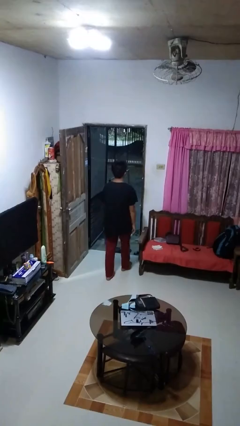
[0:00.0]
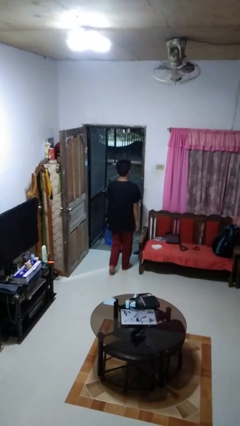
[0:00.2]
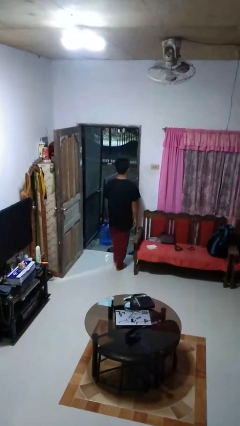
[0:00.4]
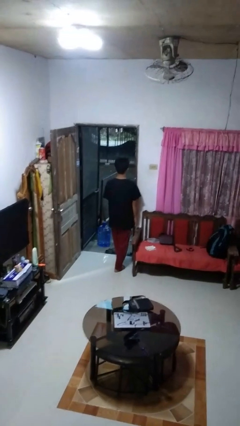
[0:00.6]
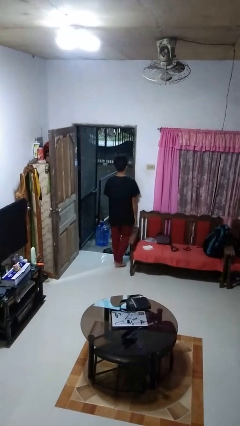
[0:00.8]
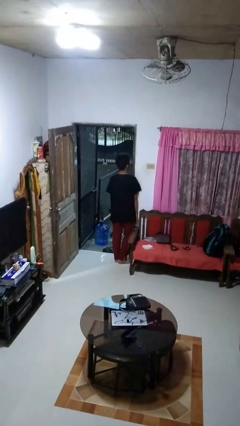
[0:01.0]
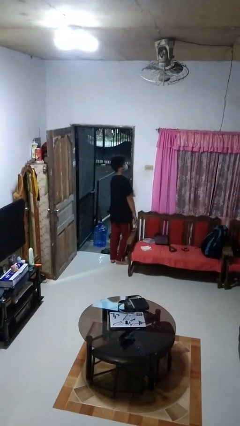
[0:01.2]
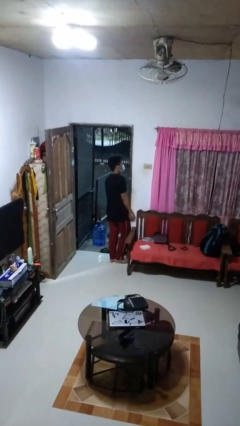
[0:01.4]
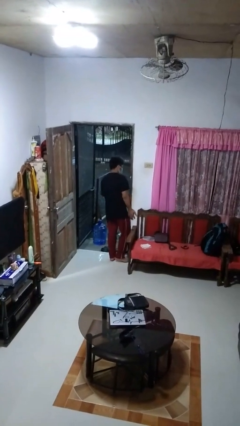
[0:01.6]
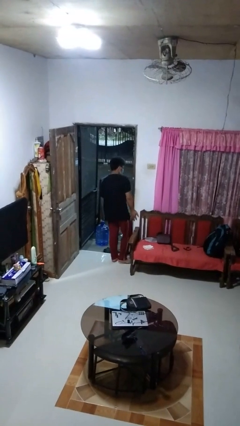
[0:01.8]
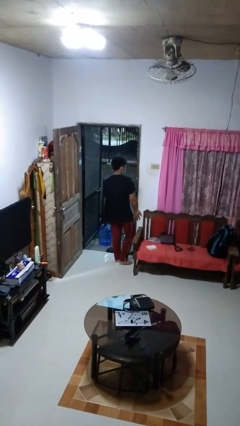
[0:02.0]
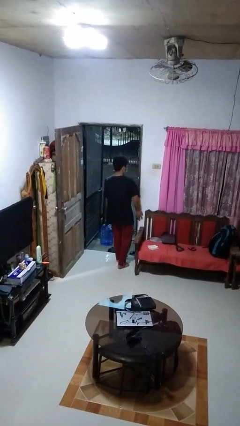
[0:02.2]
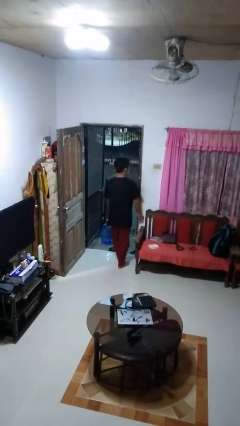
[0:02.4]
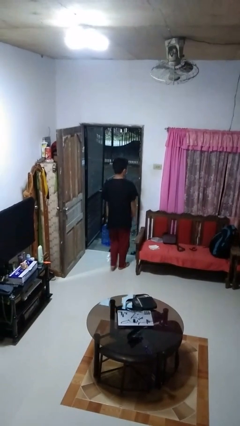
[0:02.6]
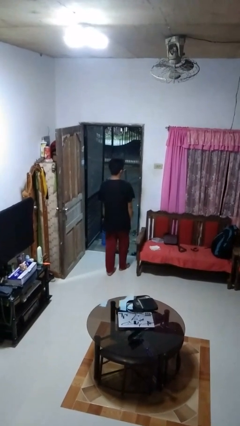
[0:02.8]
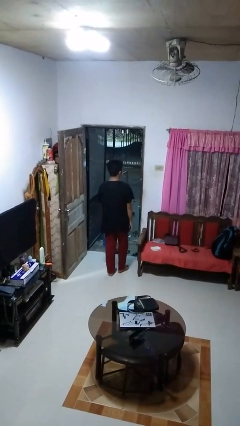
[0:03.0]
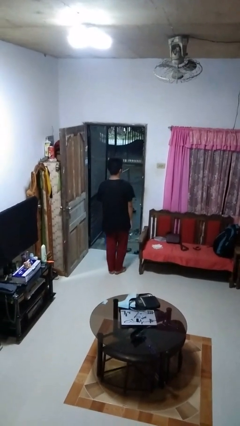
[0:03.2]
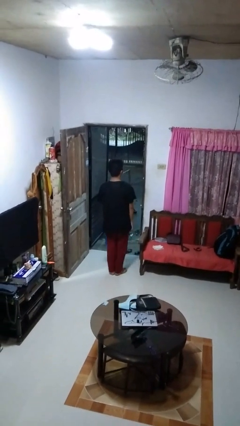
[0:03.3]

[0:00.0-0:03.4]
person bumps into wall

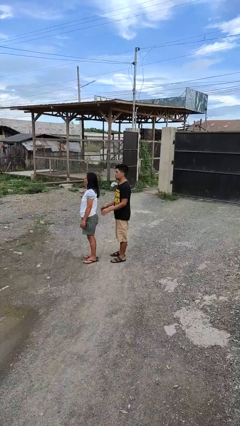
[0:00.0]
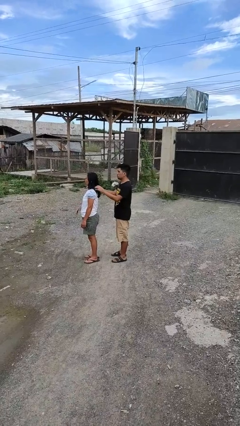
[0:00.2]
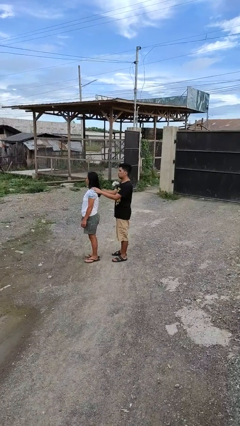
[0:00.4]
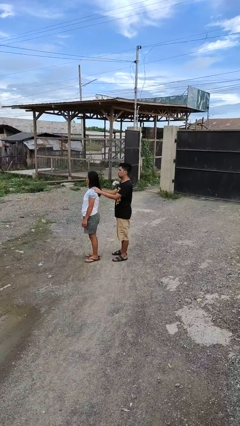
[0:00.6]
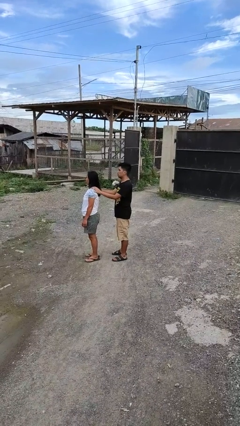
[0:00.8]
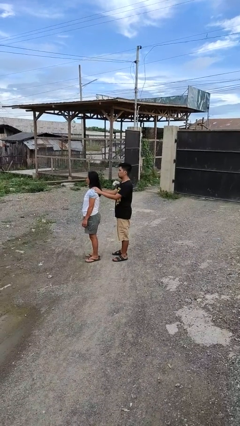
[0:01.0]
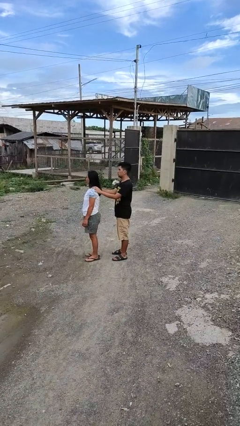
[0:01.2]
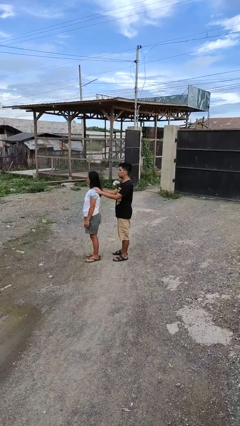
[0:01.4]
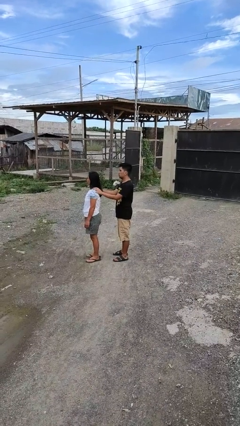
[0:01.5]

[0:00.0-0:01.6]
person grabs person by shoulder

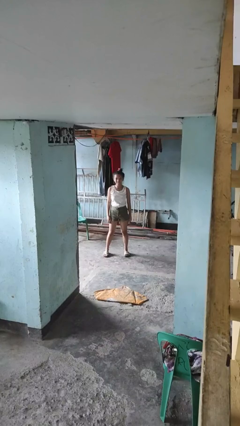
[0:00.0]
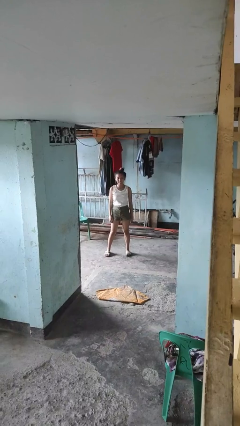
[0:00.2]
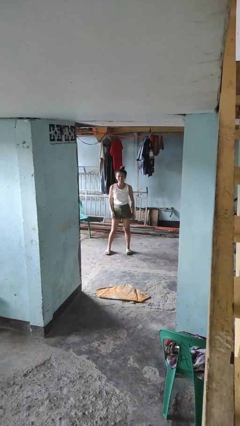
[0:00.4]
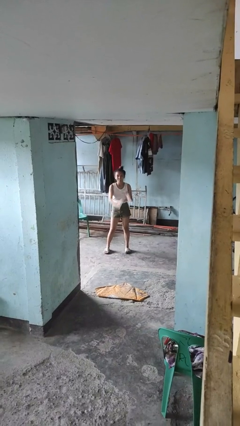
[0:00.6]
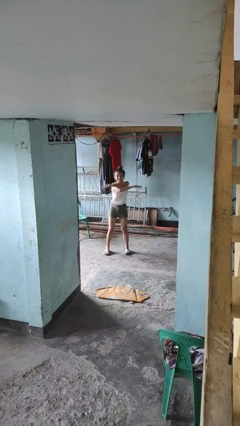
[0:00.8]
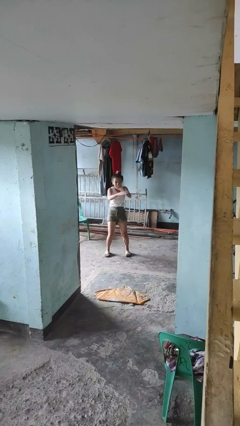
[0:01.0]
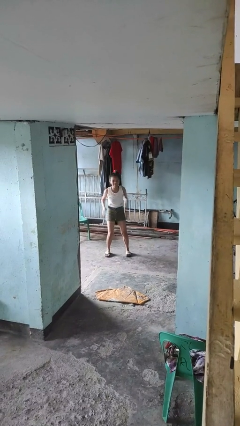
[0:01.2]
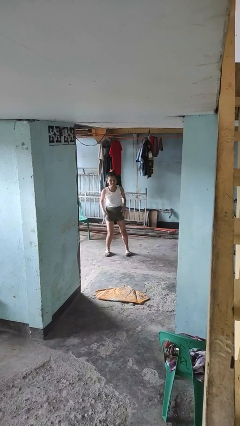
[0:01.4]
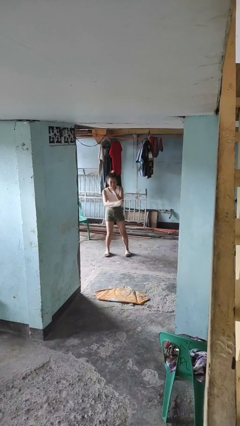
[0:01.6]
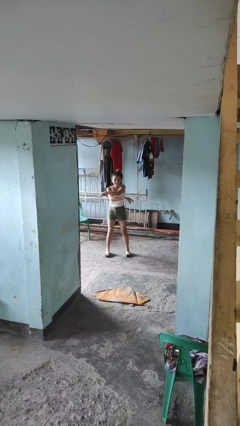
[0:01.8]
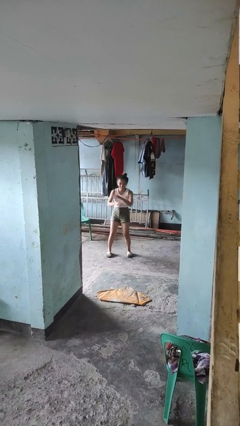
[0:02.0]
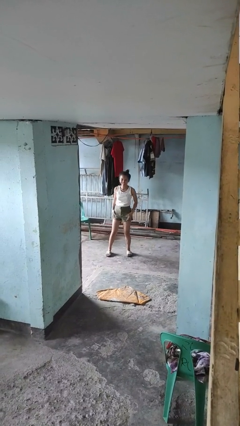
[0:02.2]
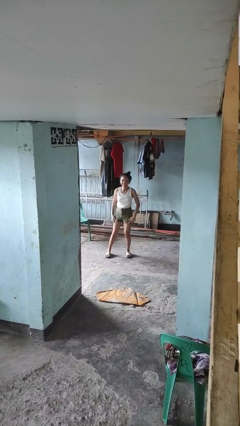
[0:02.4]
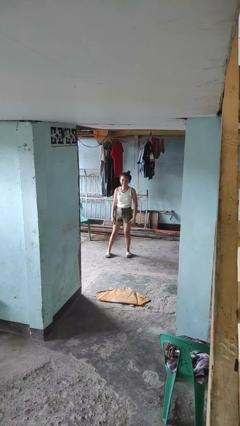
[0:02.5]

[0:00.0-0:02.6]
person dances in place

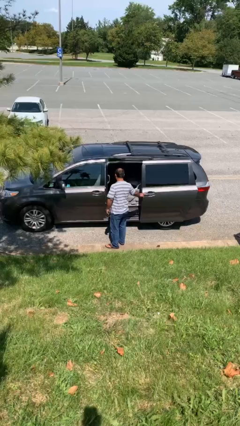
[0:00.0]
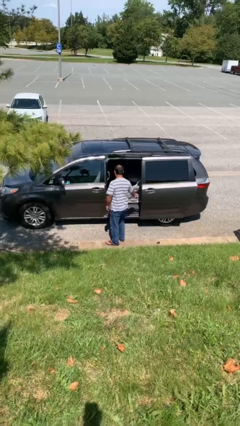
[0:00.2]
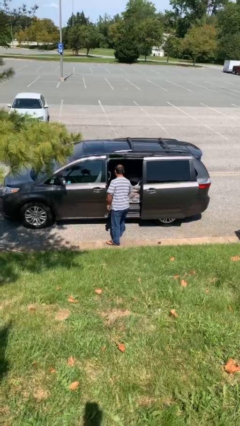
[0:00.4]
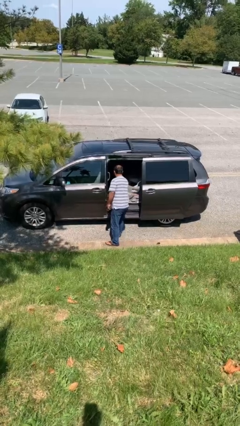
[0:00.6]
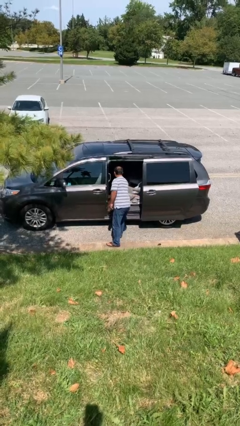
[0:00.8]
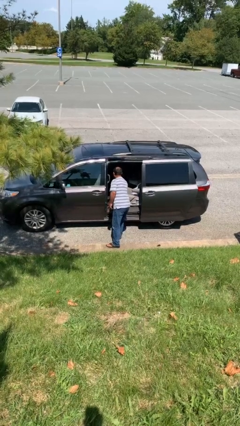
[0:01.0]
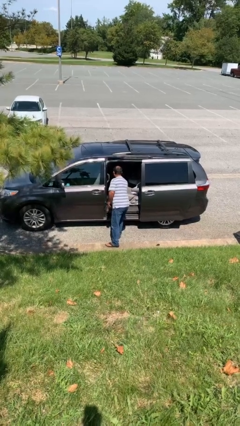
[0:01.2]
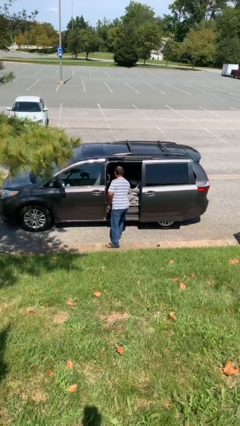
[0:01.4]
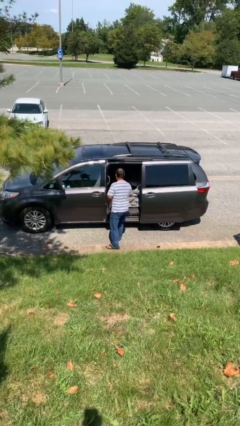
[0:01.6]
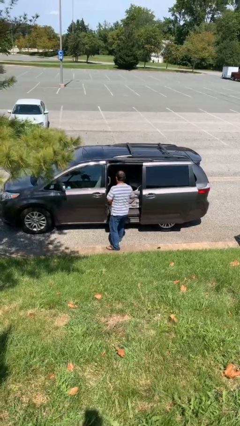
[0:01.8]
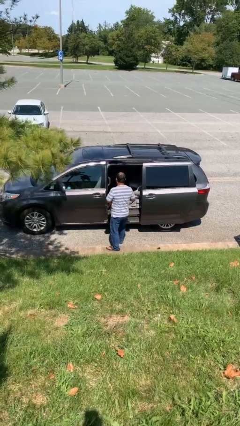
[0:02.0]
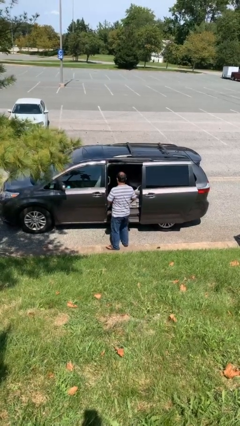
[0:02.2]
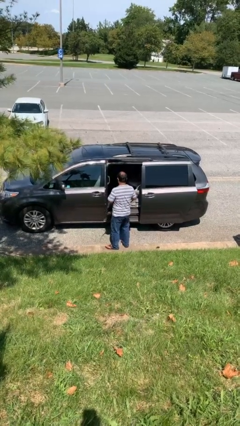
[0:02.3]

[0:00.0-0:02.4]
person unloads car

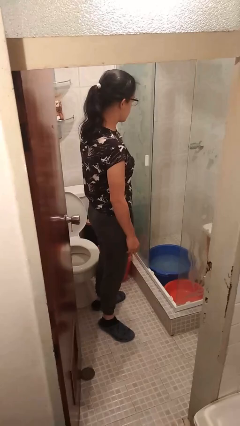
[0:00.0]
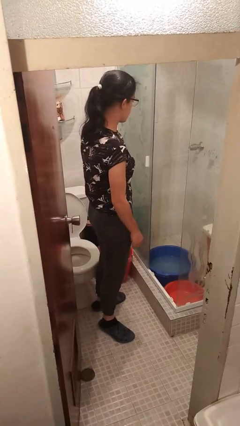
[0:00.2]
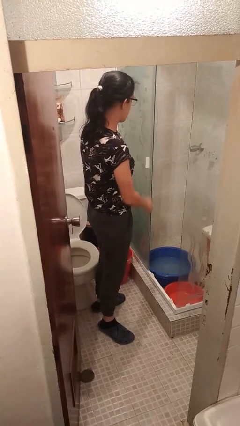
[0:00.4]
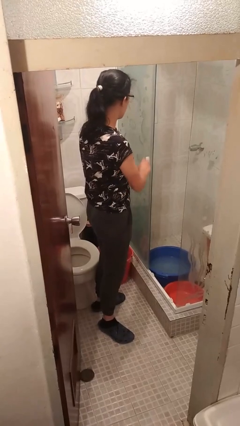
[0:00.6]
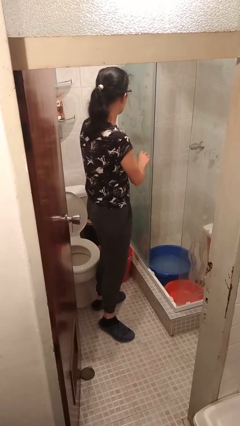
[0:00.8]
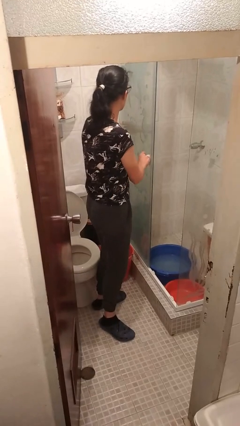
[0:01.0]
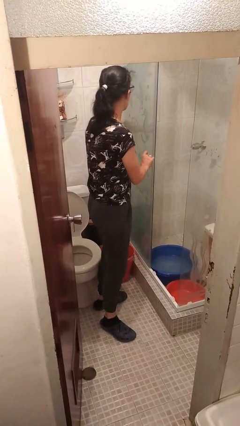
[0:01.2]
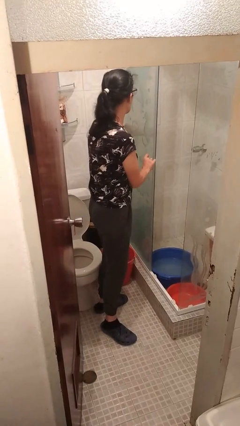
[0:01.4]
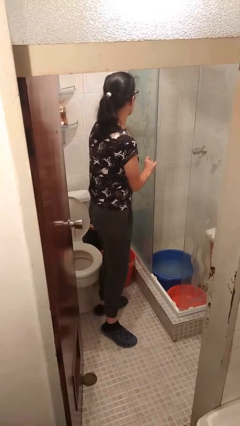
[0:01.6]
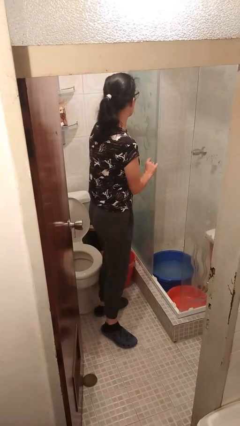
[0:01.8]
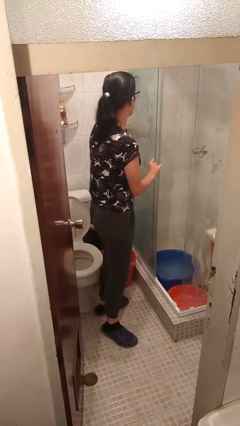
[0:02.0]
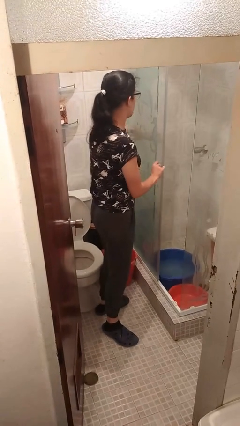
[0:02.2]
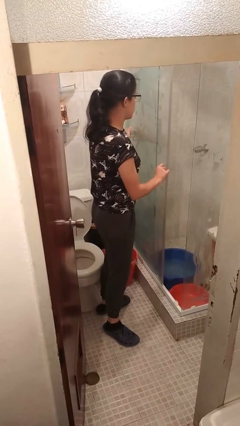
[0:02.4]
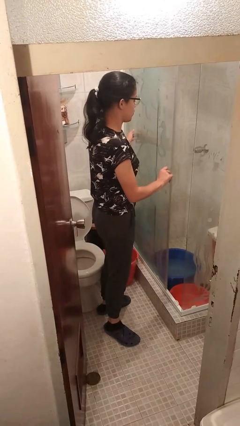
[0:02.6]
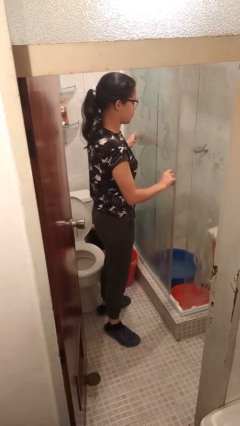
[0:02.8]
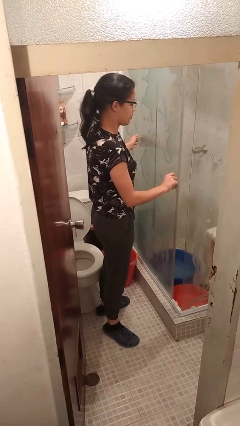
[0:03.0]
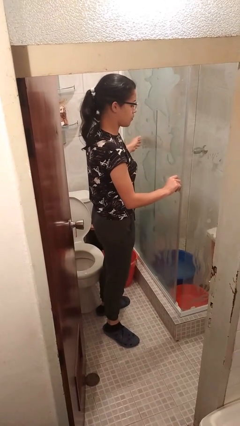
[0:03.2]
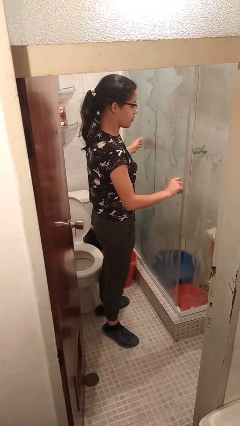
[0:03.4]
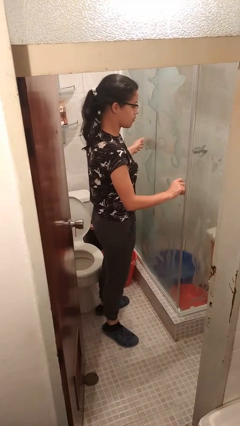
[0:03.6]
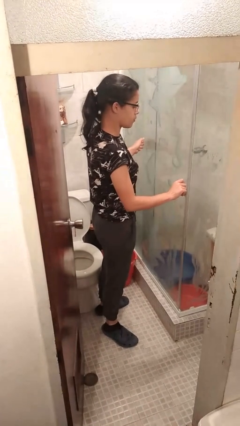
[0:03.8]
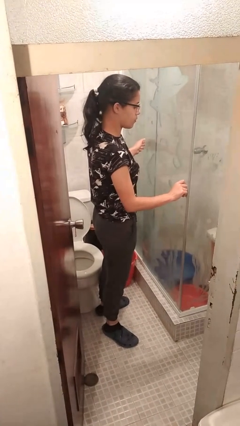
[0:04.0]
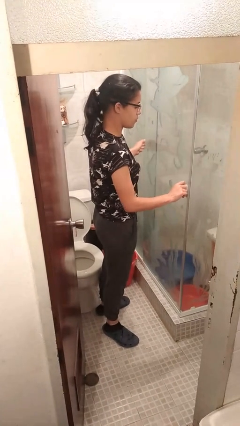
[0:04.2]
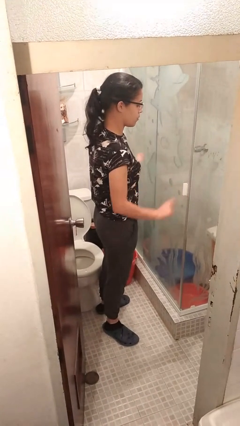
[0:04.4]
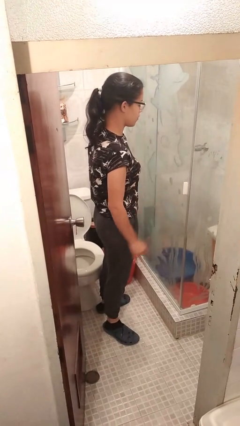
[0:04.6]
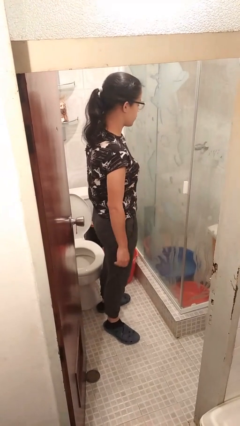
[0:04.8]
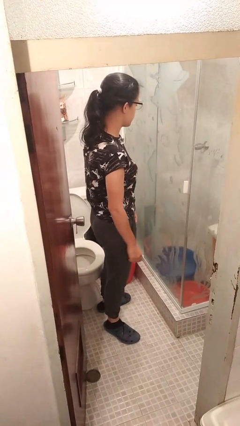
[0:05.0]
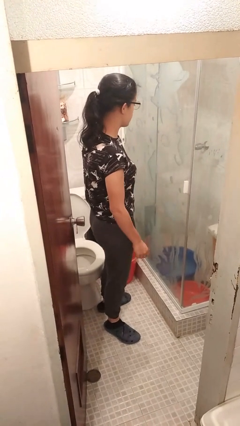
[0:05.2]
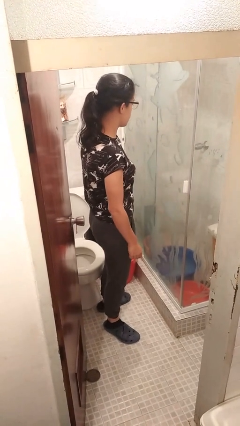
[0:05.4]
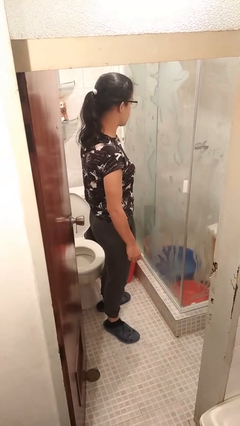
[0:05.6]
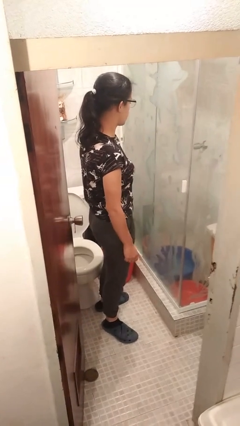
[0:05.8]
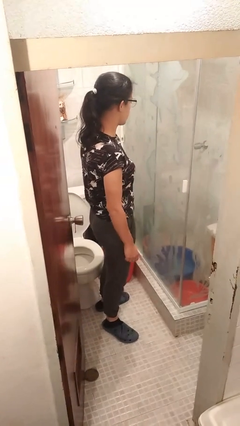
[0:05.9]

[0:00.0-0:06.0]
person closes sliding door

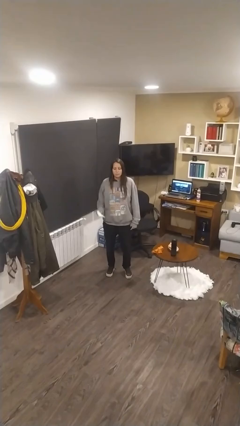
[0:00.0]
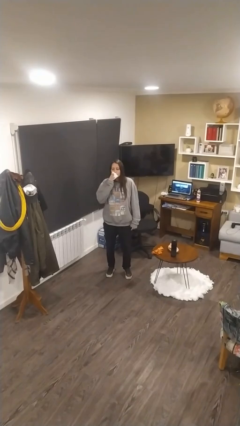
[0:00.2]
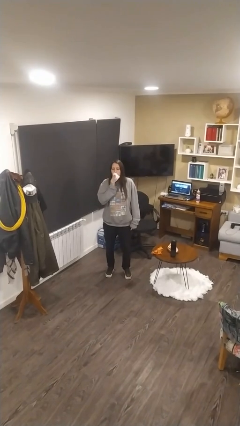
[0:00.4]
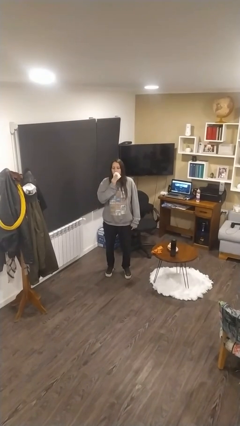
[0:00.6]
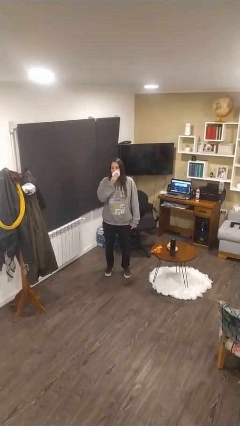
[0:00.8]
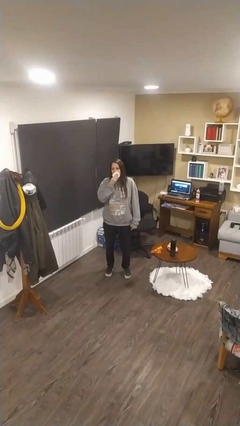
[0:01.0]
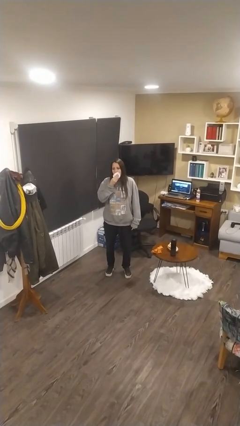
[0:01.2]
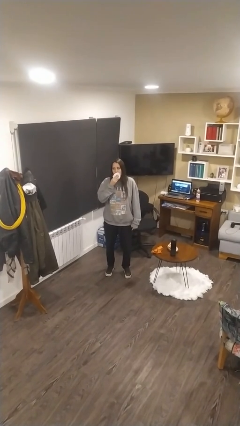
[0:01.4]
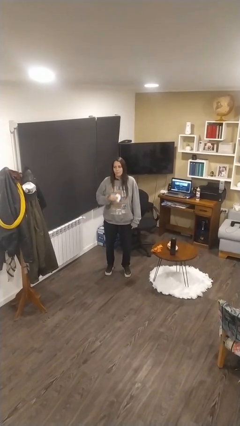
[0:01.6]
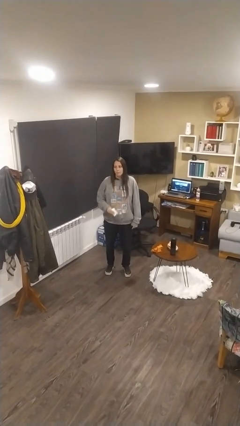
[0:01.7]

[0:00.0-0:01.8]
person wipes mouth with napkin
